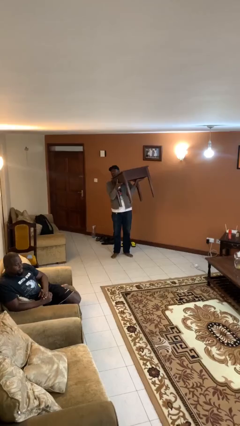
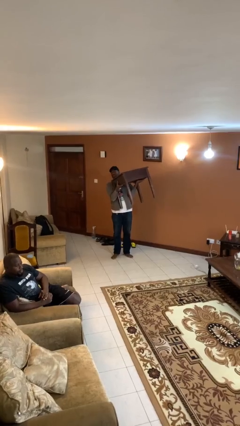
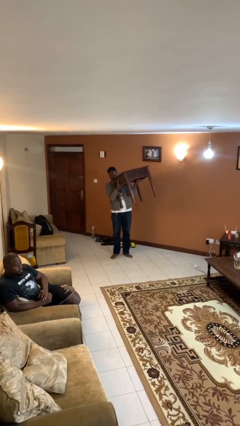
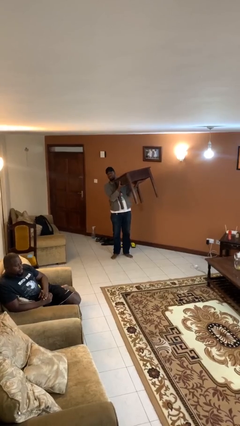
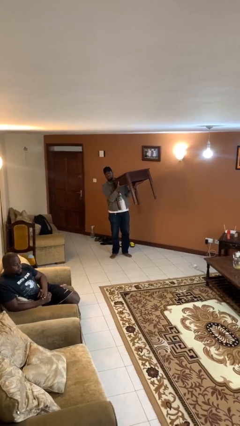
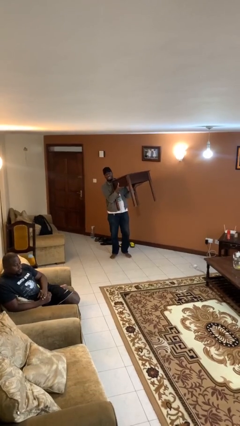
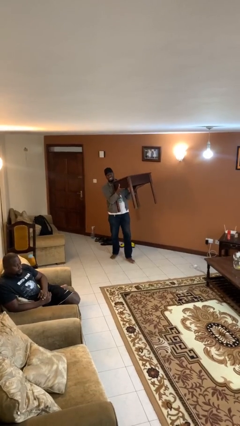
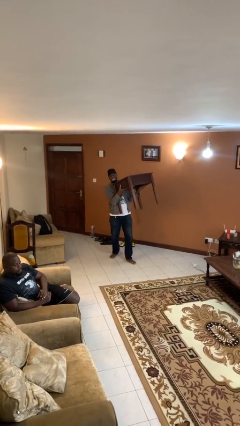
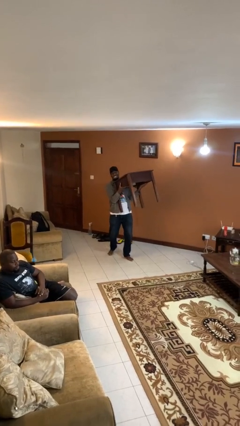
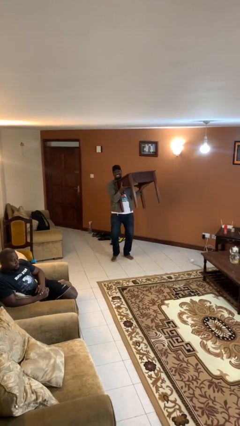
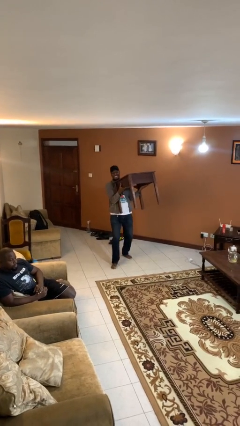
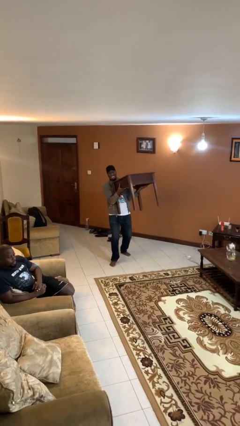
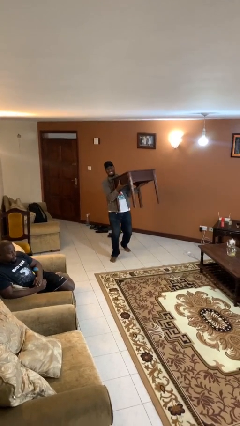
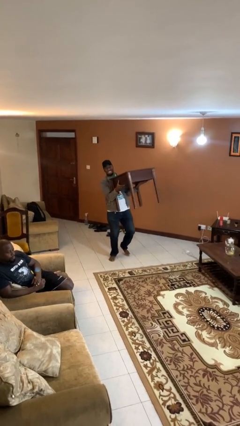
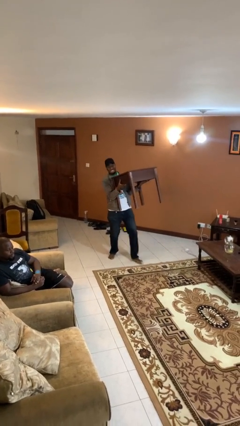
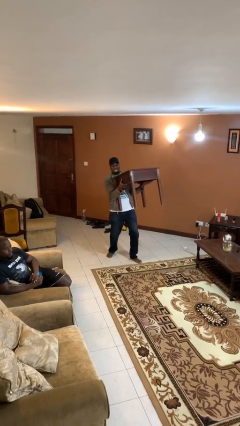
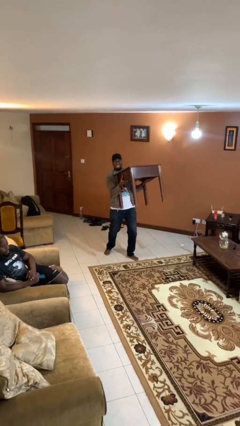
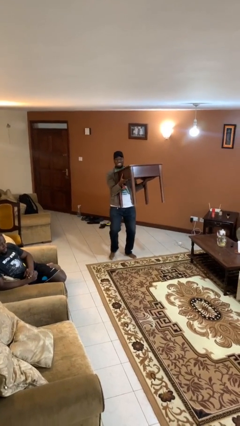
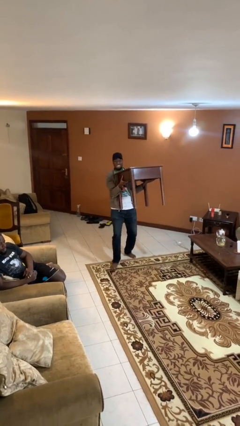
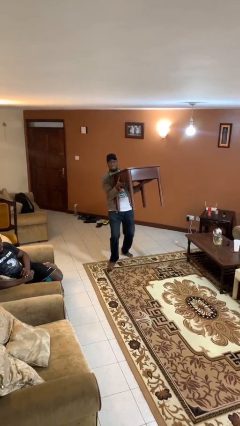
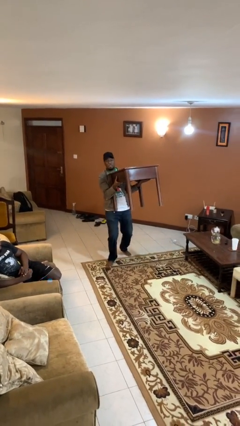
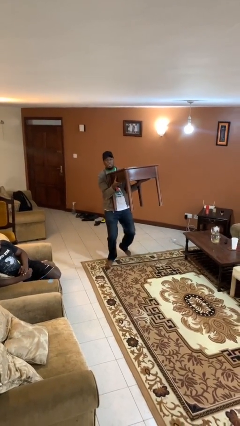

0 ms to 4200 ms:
person carries heavy object

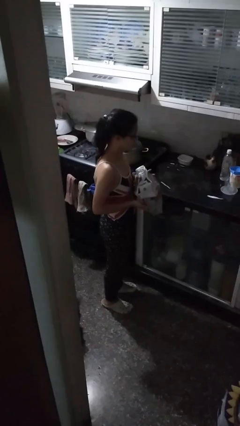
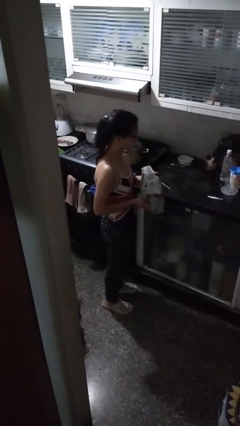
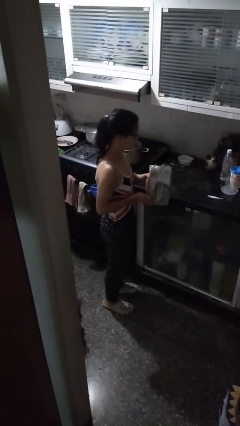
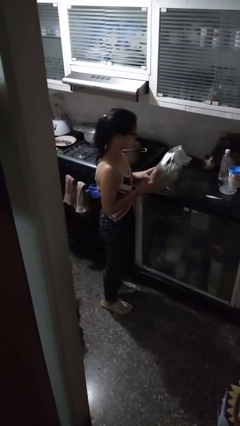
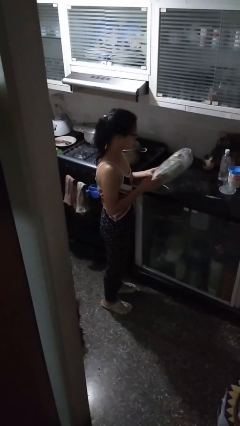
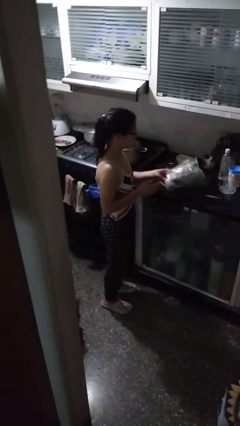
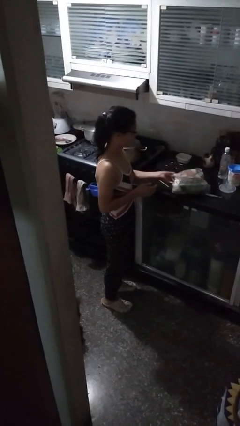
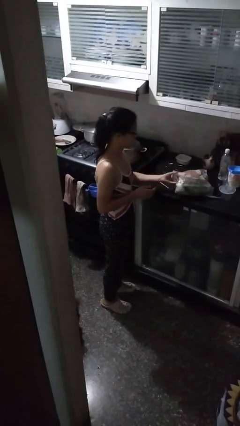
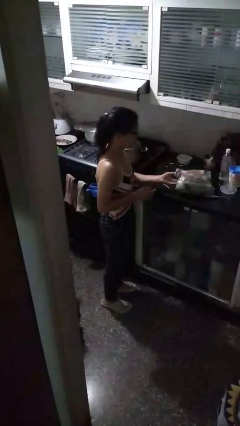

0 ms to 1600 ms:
person puts down object on countertop

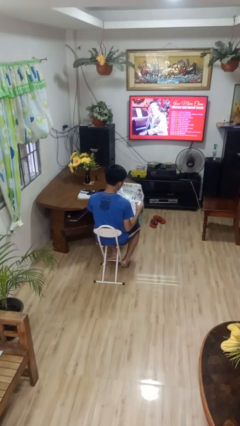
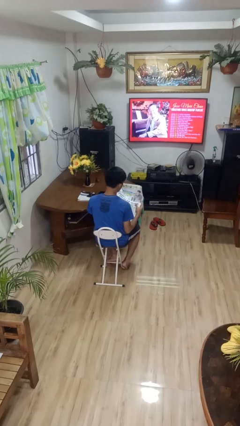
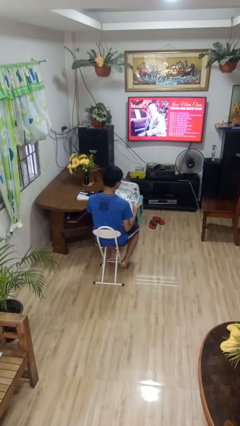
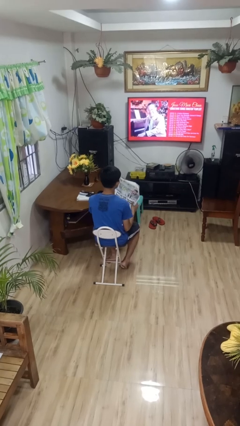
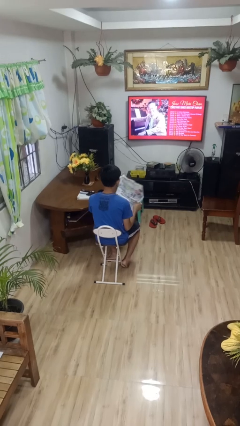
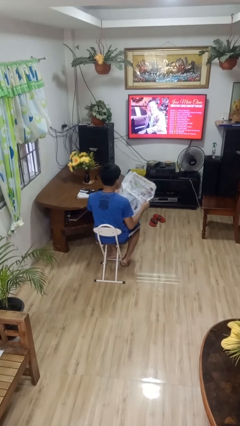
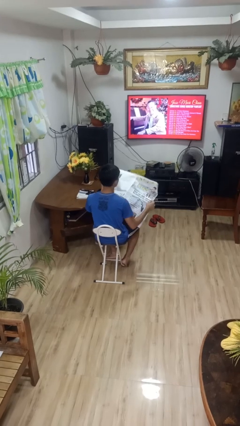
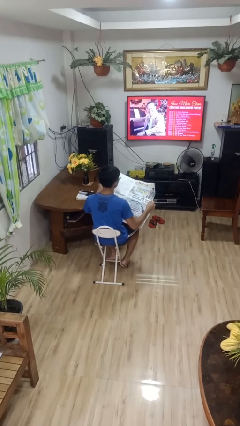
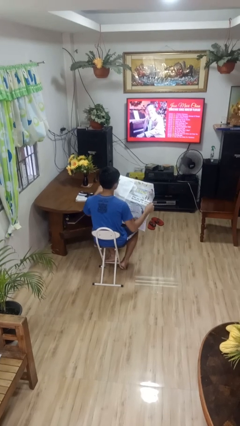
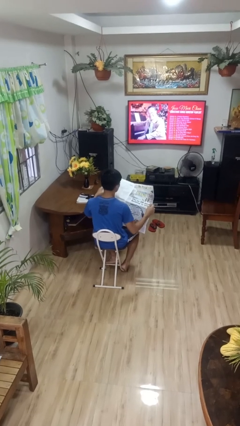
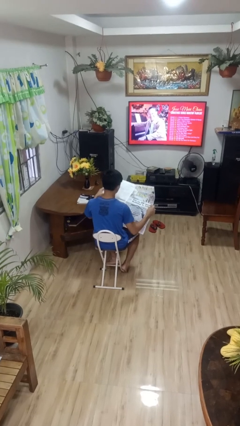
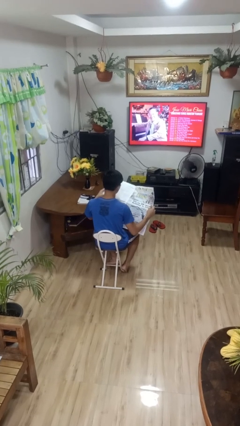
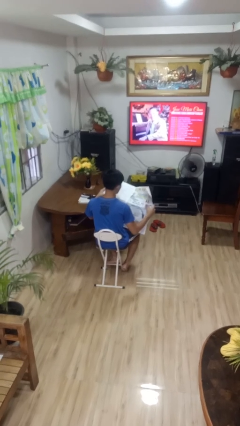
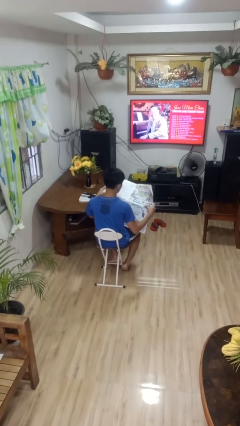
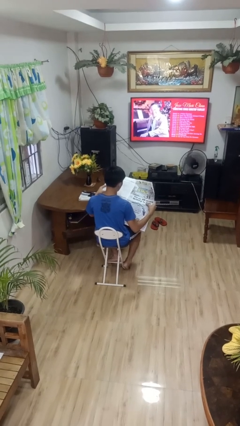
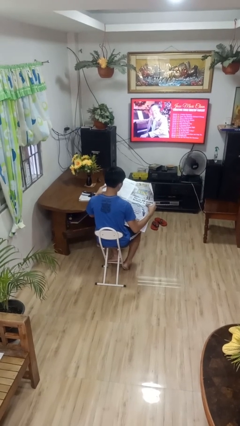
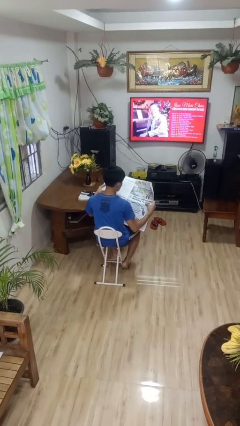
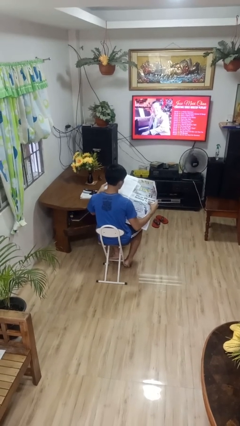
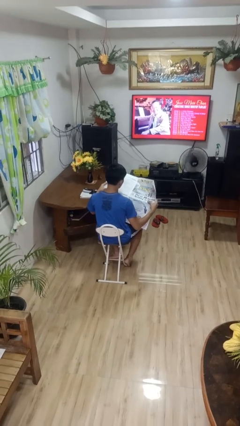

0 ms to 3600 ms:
person reads newspaper

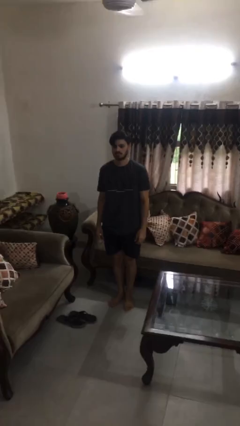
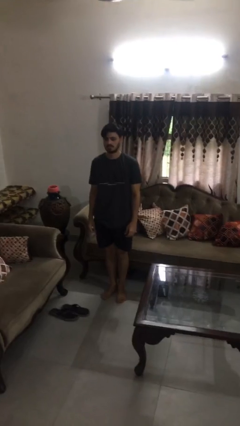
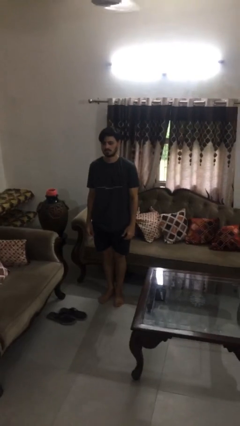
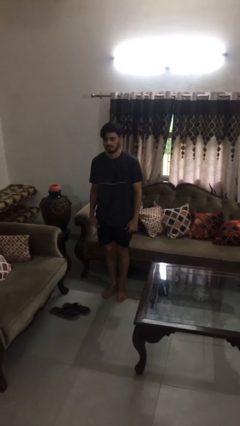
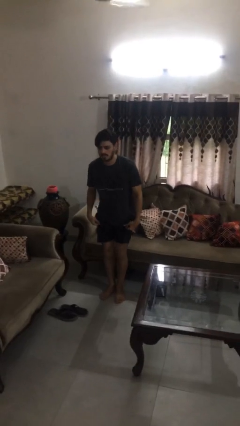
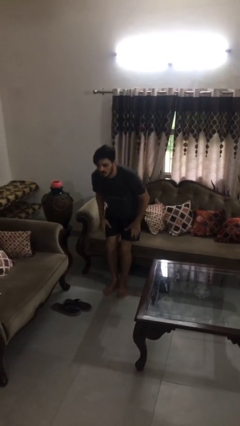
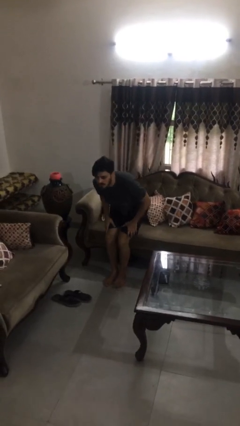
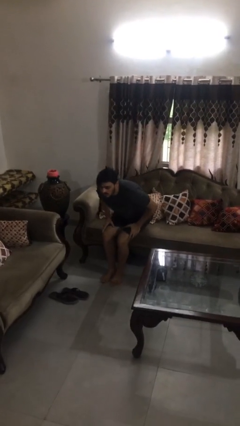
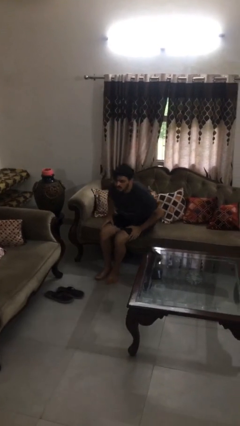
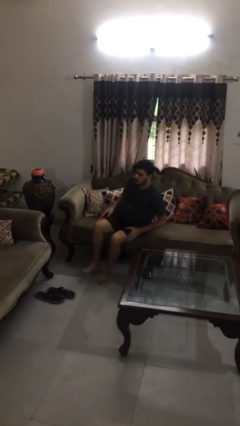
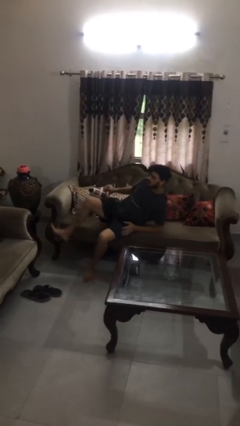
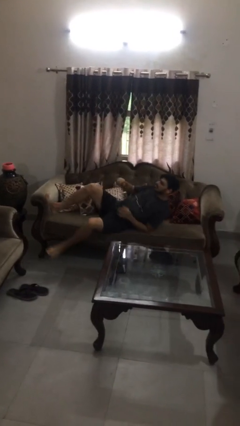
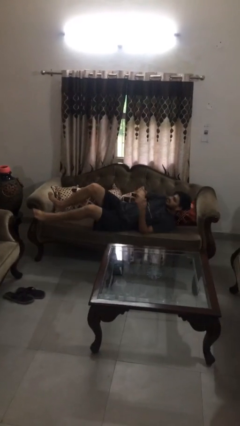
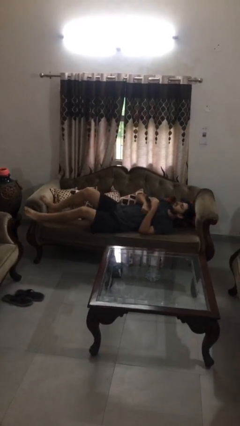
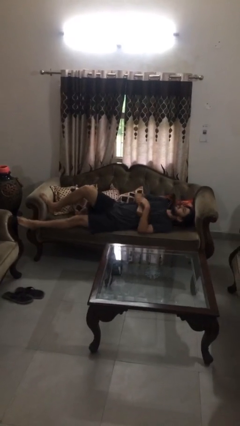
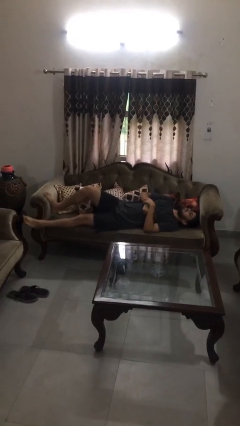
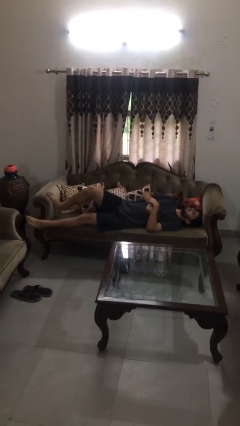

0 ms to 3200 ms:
person lies down on couch

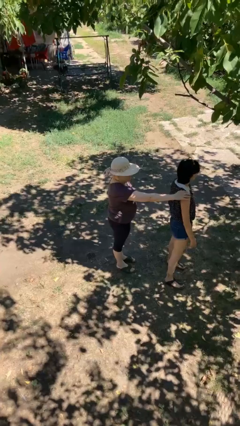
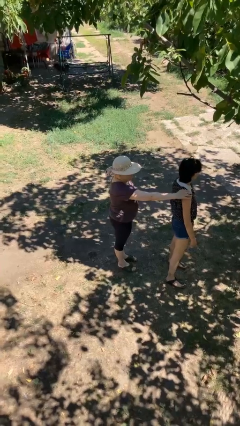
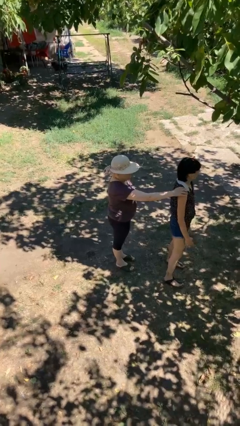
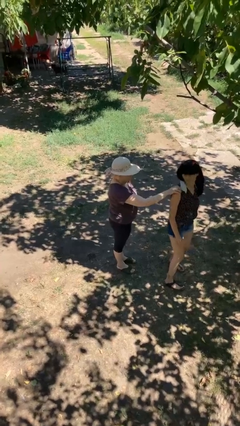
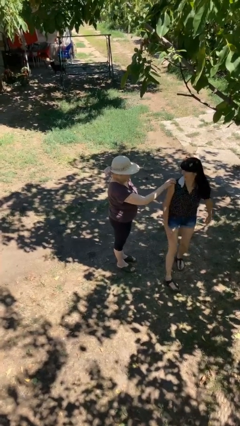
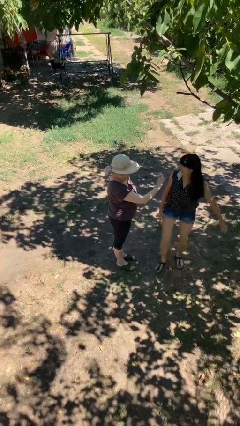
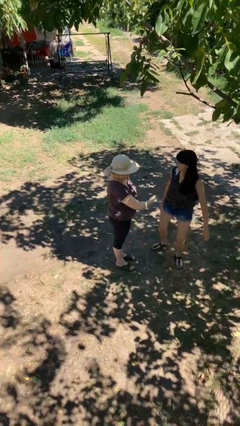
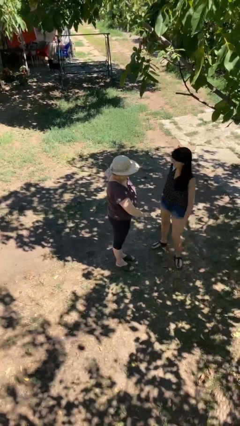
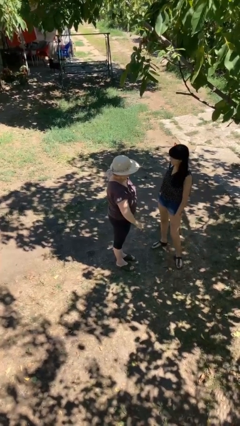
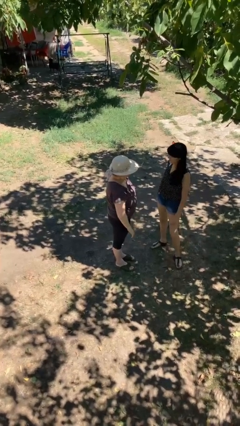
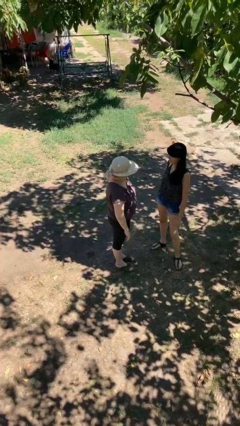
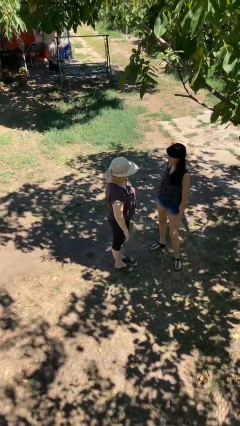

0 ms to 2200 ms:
person spins person around

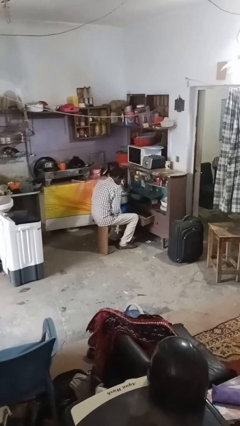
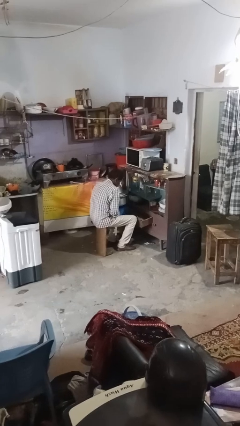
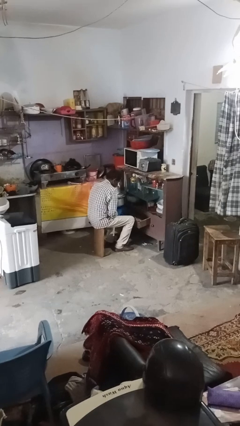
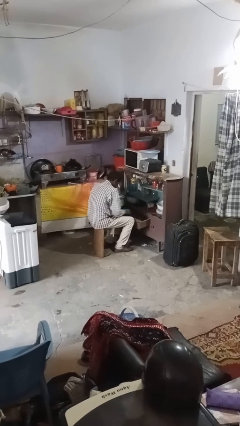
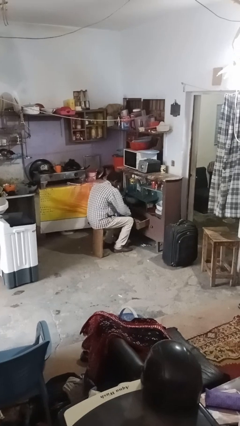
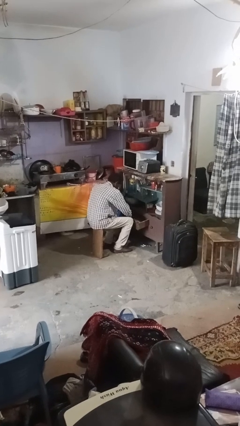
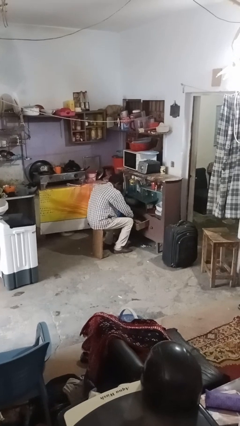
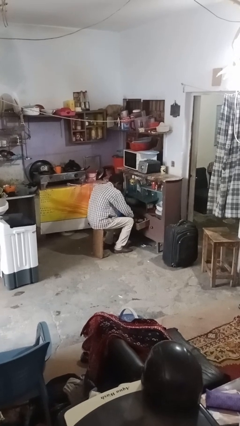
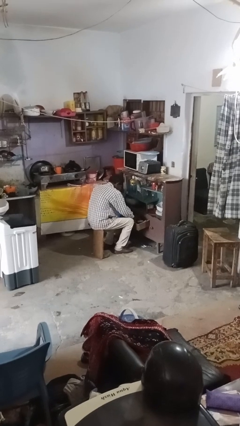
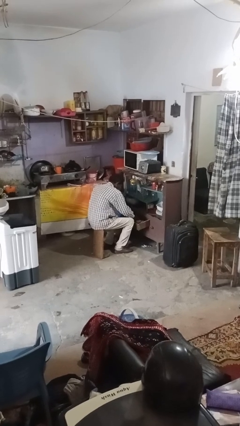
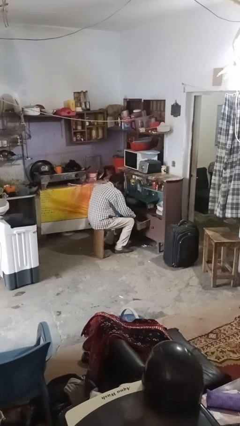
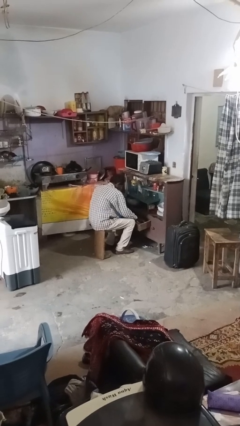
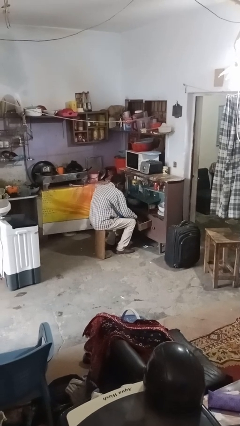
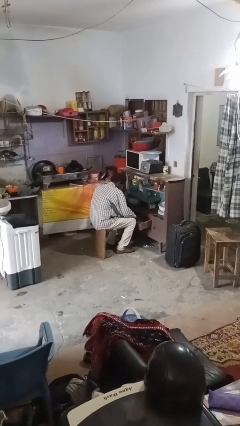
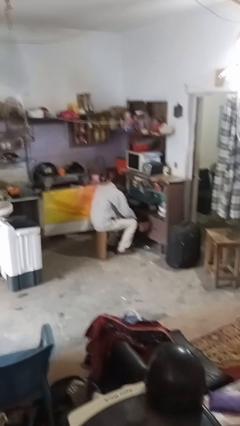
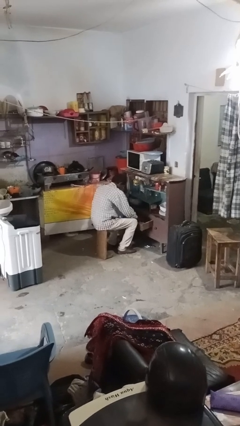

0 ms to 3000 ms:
person searches in kitchen drawer
